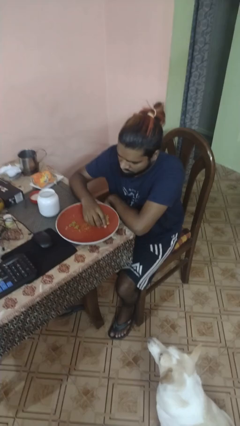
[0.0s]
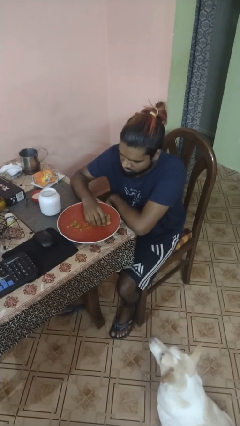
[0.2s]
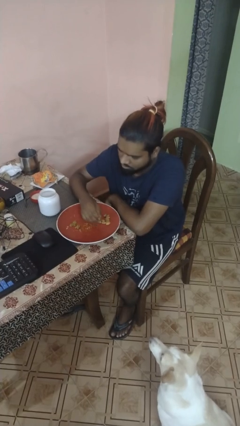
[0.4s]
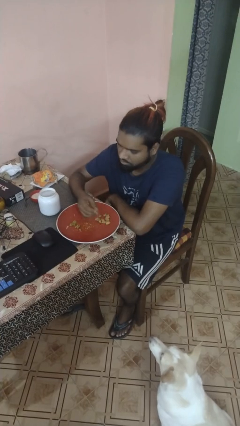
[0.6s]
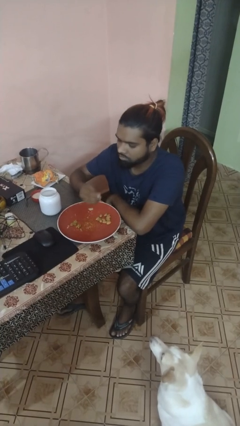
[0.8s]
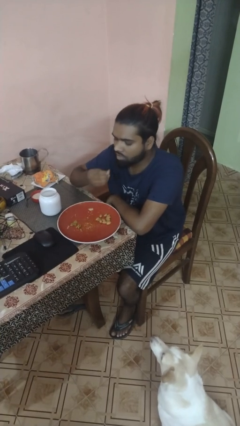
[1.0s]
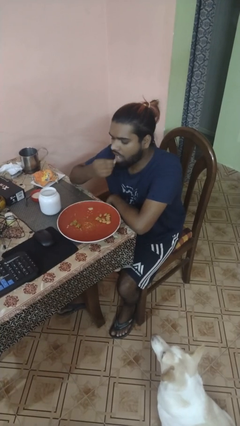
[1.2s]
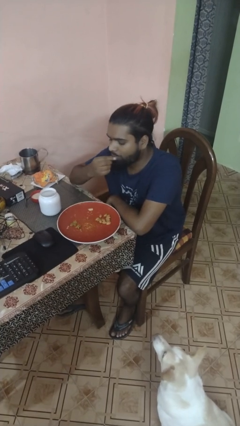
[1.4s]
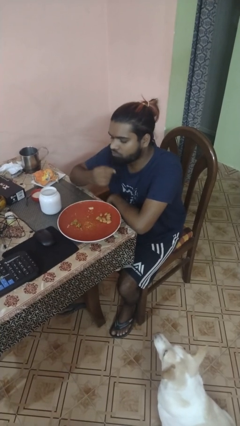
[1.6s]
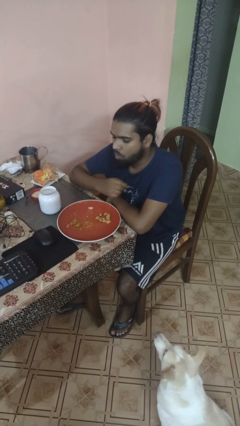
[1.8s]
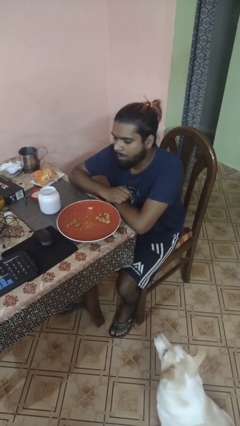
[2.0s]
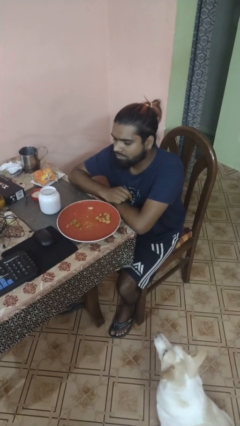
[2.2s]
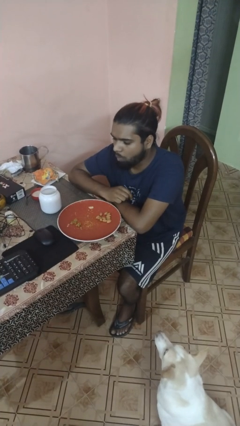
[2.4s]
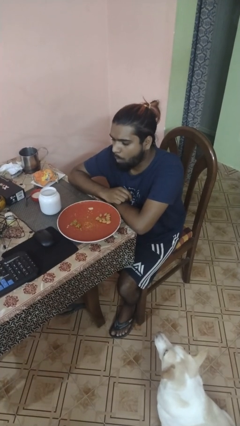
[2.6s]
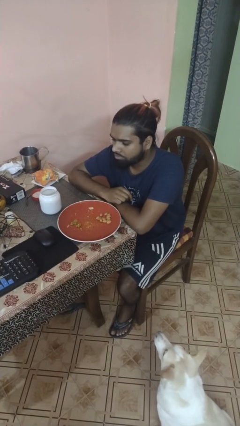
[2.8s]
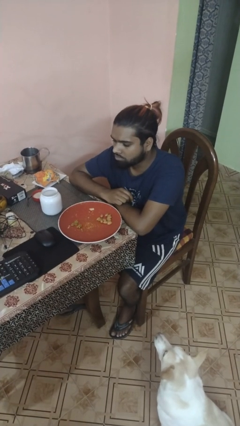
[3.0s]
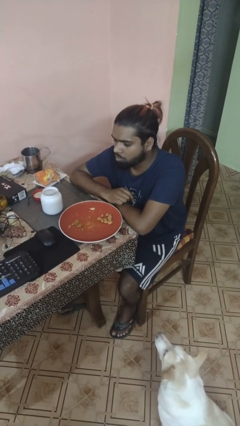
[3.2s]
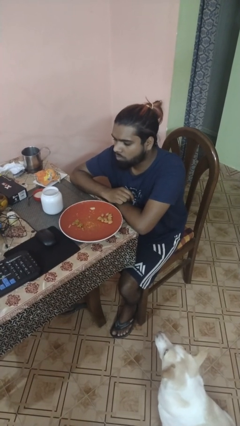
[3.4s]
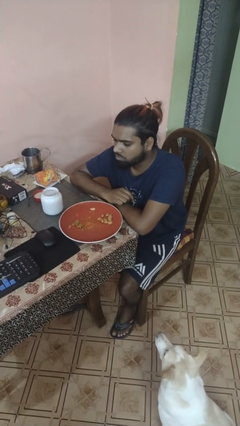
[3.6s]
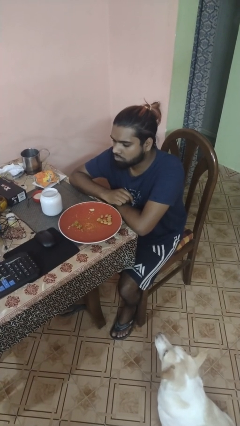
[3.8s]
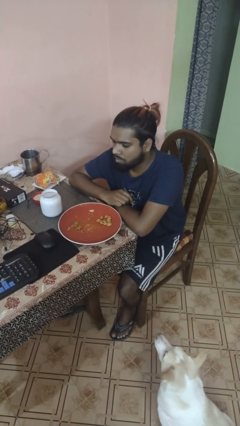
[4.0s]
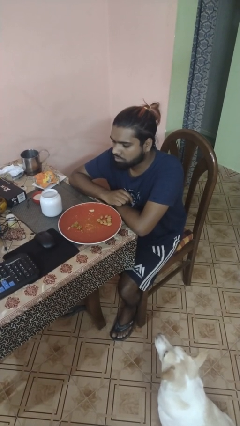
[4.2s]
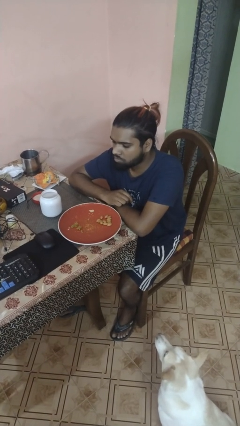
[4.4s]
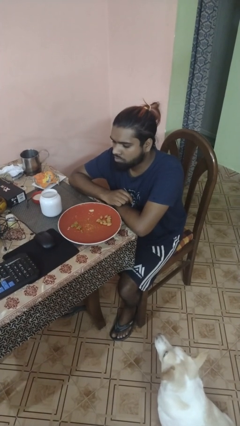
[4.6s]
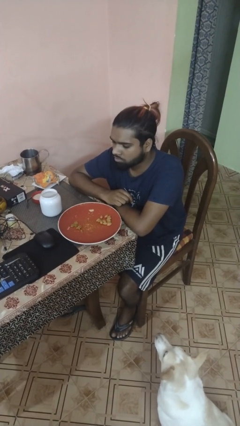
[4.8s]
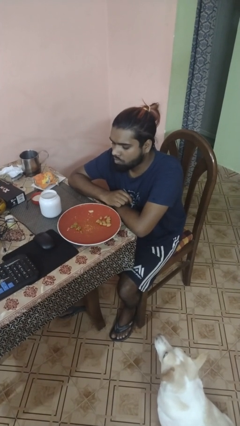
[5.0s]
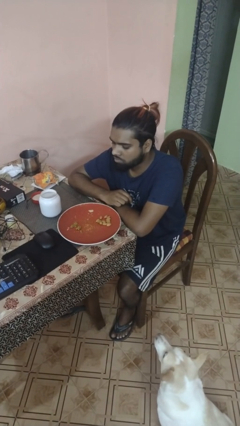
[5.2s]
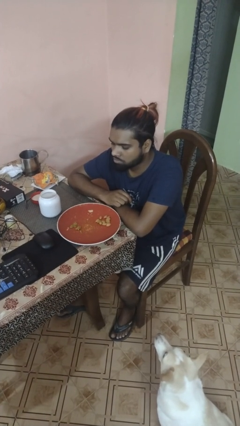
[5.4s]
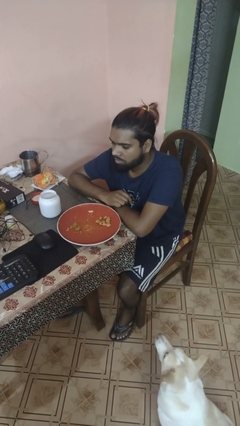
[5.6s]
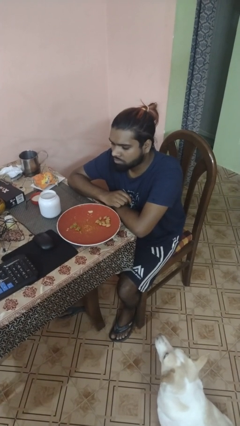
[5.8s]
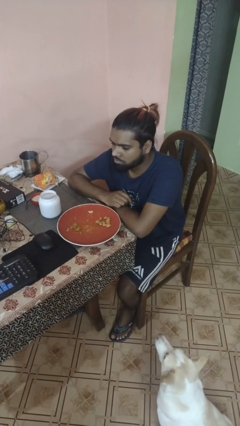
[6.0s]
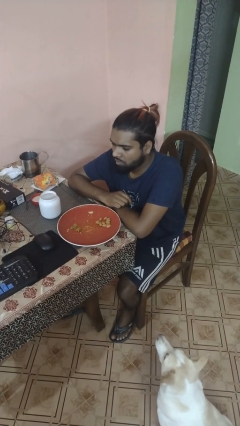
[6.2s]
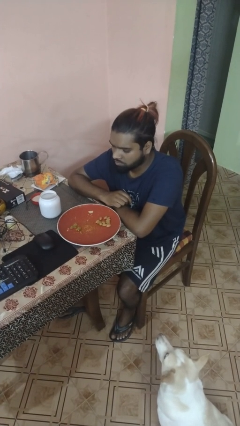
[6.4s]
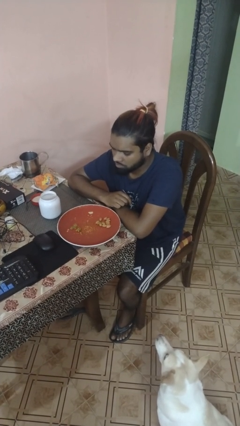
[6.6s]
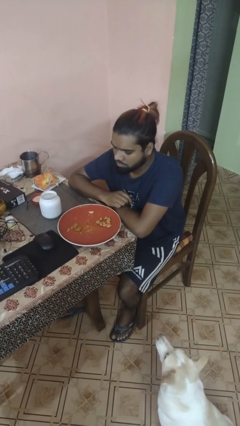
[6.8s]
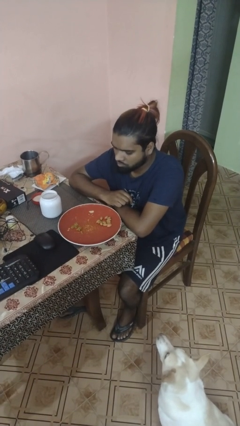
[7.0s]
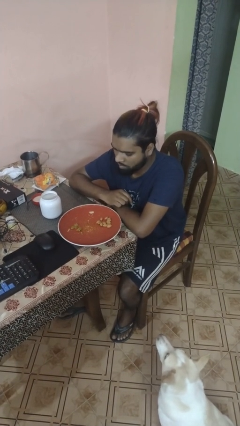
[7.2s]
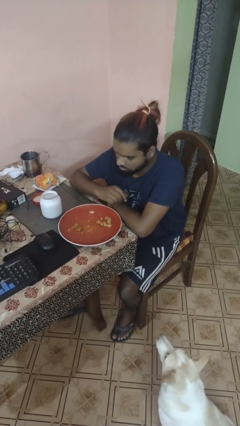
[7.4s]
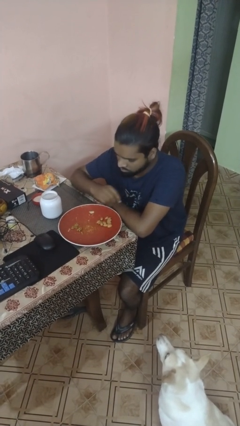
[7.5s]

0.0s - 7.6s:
person eats with hands

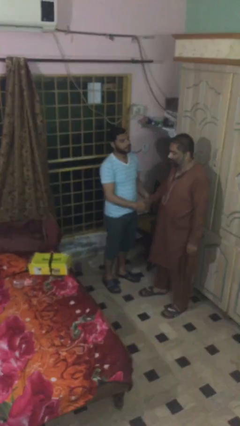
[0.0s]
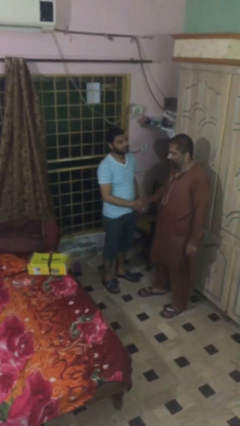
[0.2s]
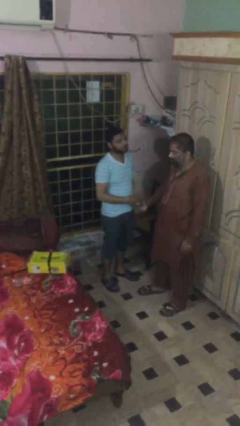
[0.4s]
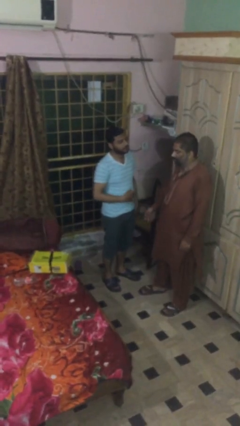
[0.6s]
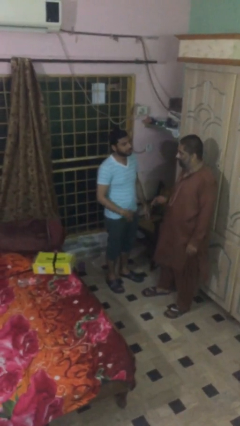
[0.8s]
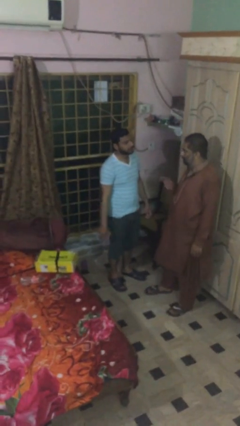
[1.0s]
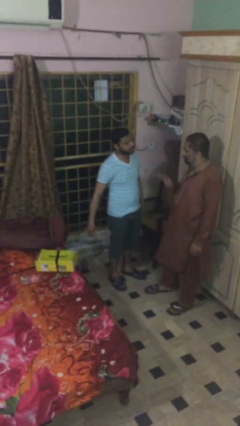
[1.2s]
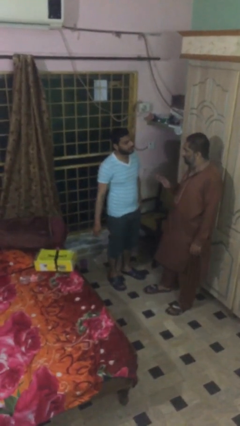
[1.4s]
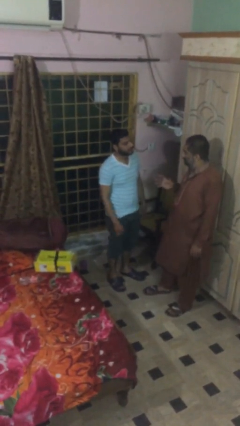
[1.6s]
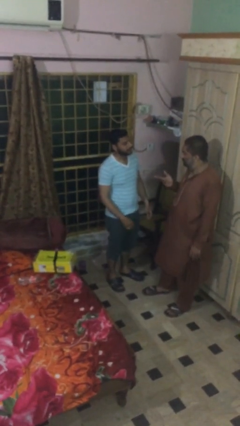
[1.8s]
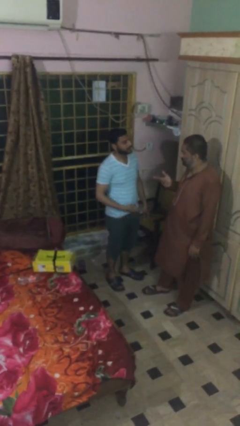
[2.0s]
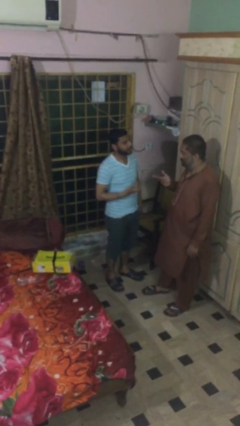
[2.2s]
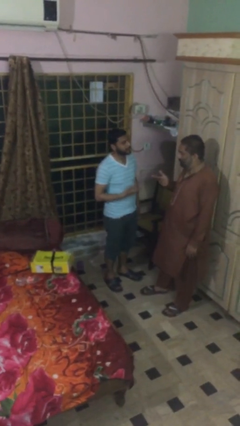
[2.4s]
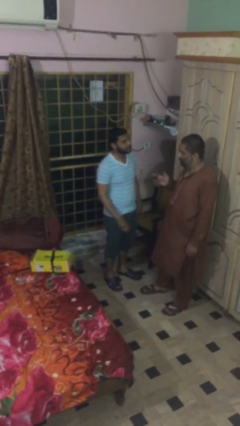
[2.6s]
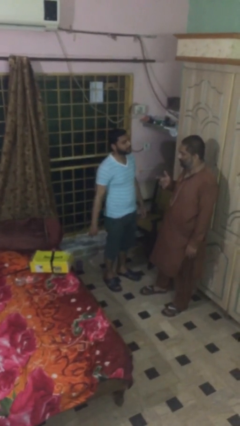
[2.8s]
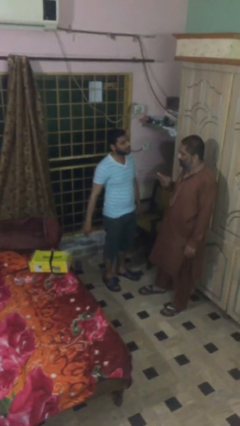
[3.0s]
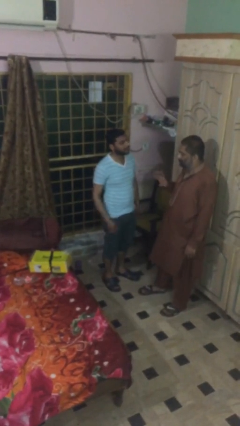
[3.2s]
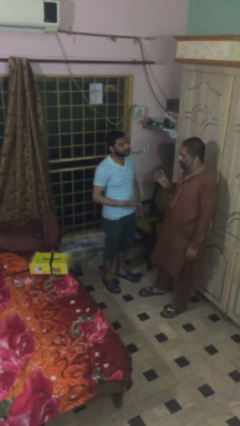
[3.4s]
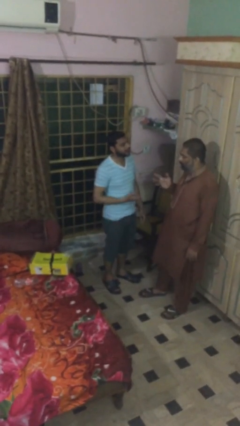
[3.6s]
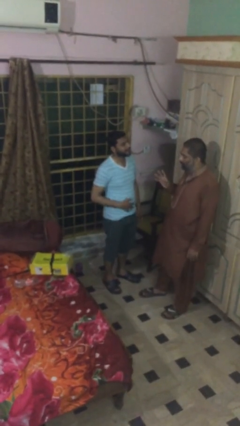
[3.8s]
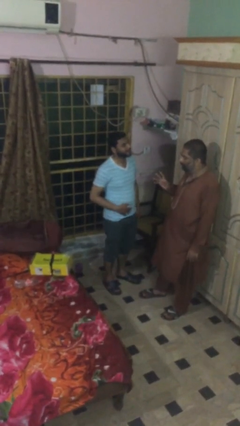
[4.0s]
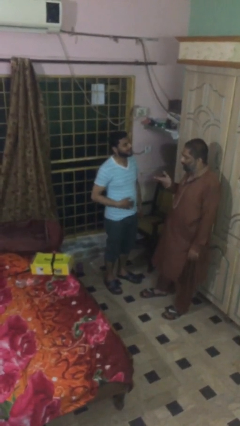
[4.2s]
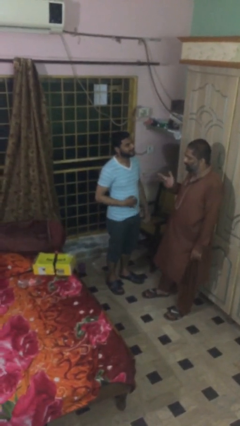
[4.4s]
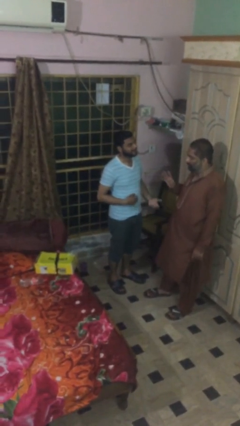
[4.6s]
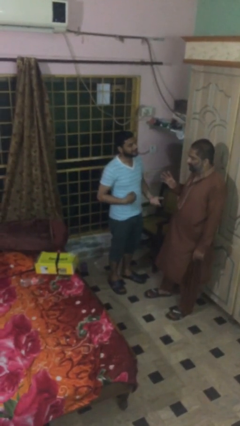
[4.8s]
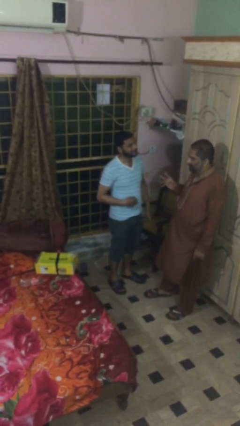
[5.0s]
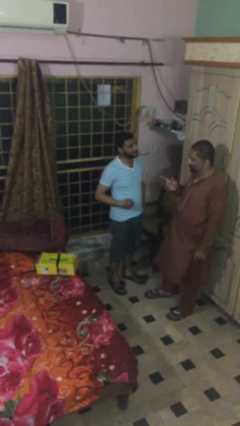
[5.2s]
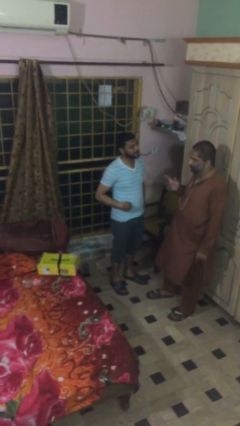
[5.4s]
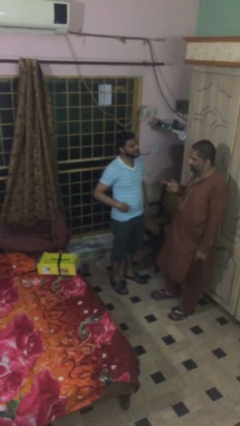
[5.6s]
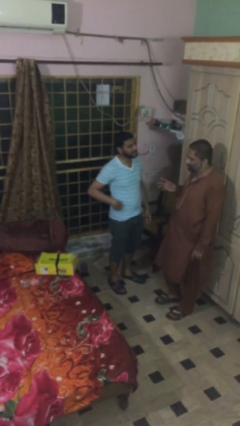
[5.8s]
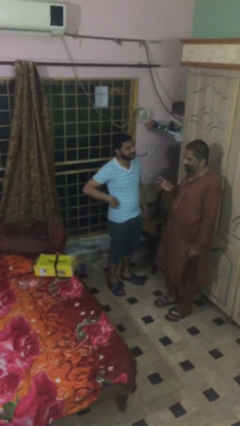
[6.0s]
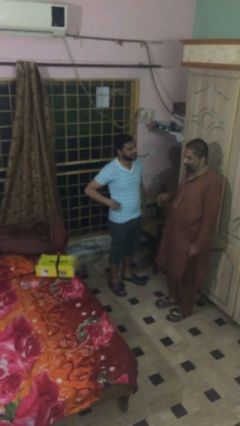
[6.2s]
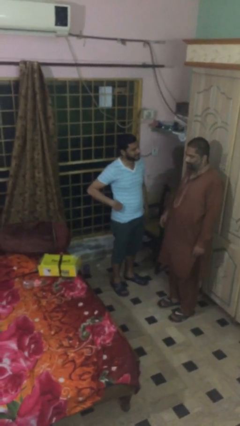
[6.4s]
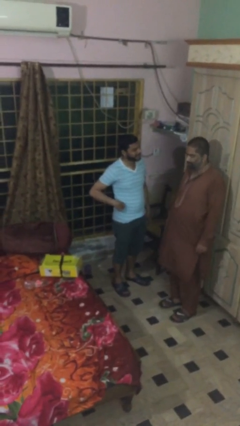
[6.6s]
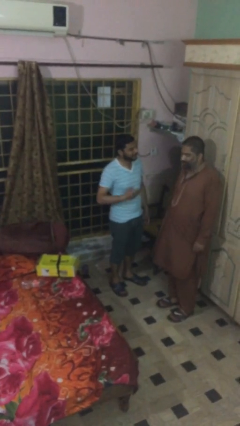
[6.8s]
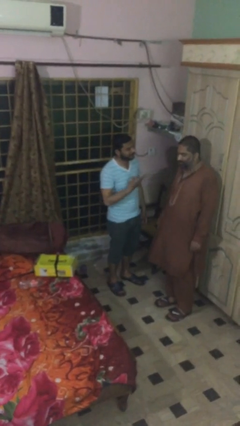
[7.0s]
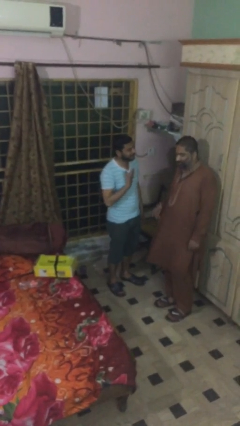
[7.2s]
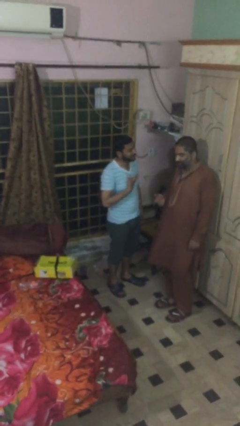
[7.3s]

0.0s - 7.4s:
person talks to person

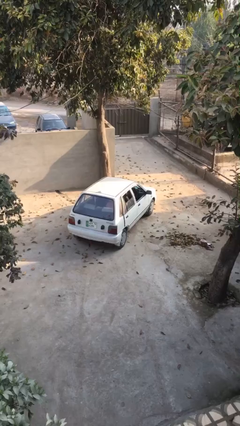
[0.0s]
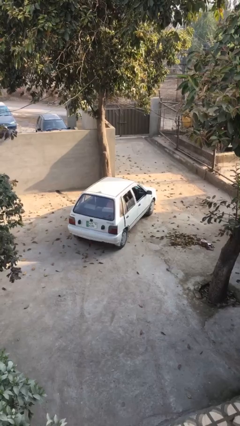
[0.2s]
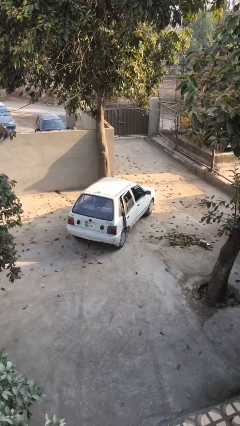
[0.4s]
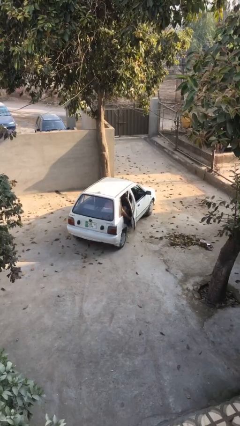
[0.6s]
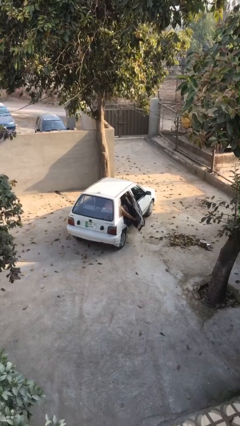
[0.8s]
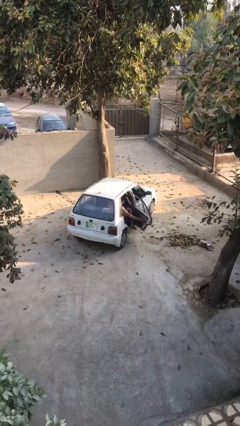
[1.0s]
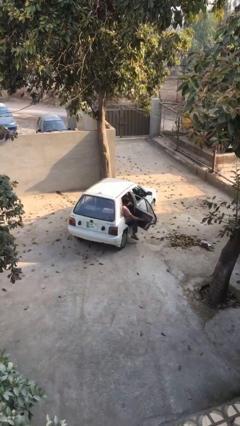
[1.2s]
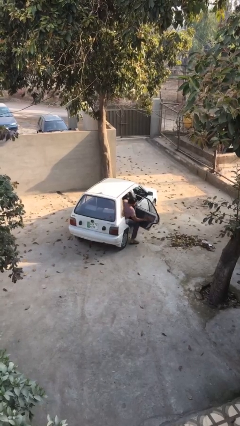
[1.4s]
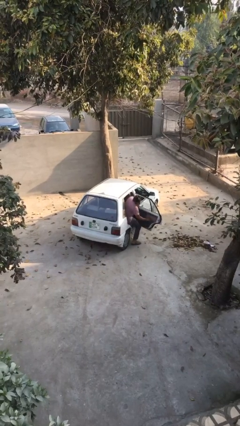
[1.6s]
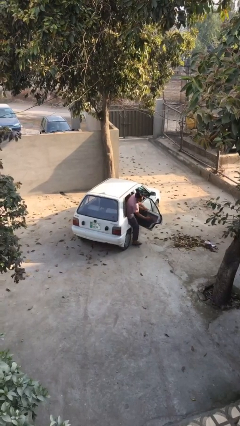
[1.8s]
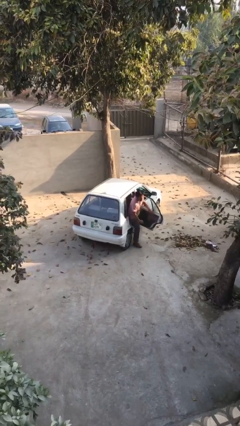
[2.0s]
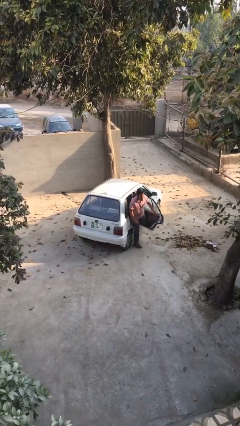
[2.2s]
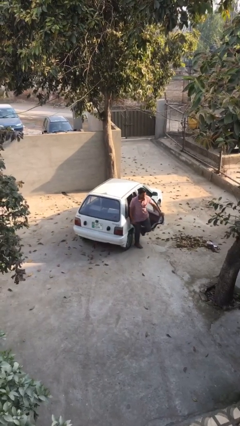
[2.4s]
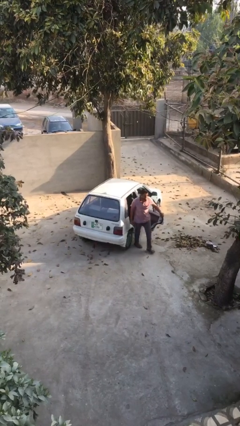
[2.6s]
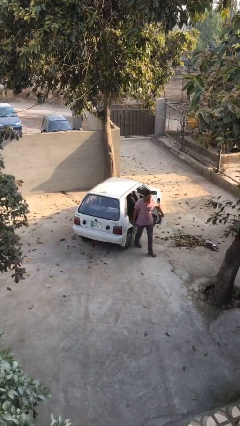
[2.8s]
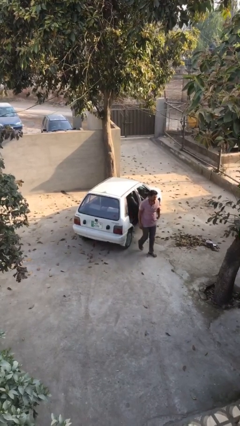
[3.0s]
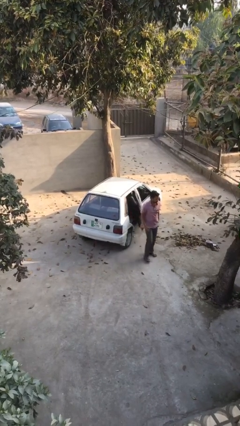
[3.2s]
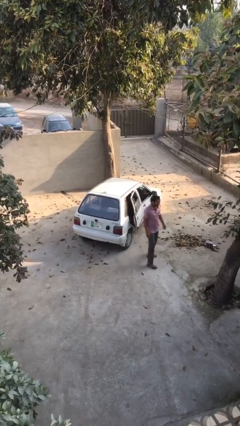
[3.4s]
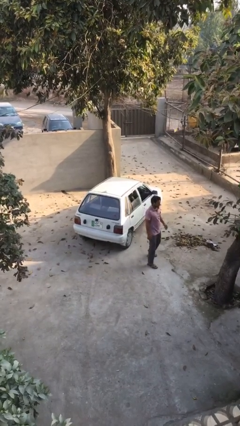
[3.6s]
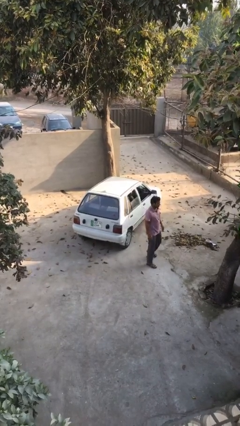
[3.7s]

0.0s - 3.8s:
car drops off person
